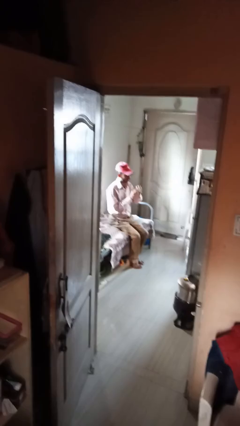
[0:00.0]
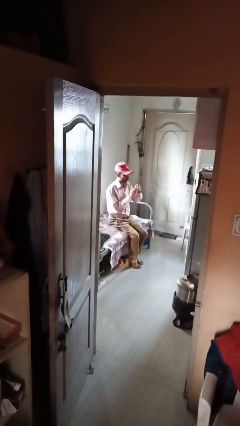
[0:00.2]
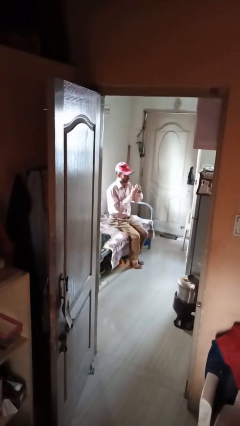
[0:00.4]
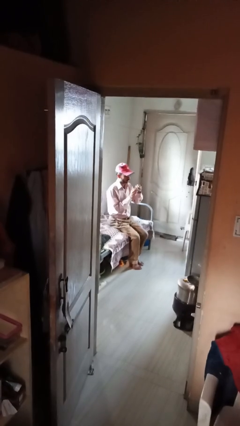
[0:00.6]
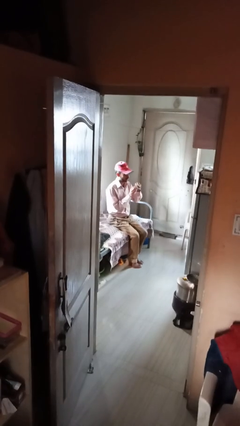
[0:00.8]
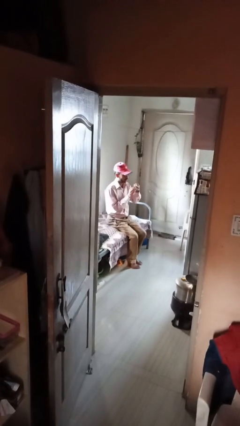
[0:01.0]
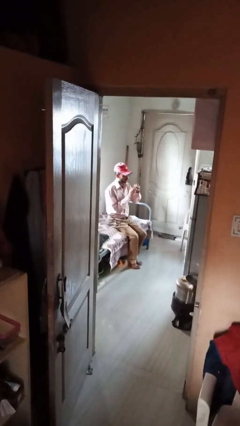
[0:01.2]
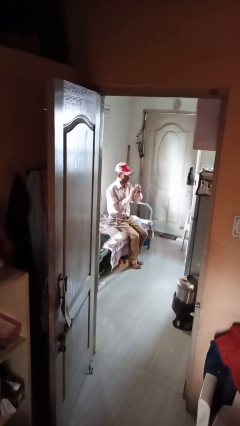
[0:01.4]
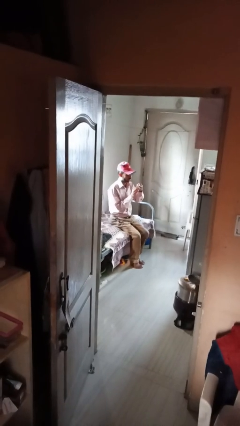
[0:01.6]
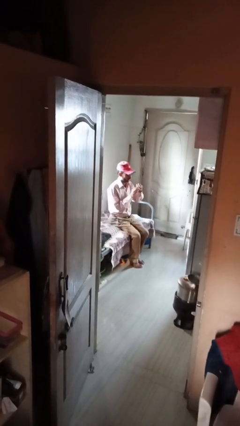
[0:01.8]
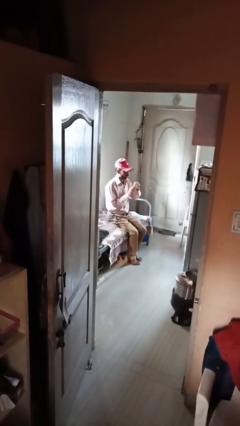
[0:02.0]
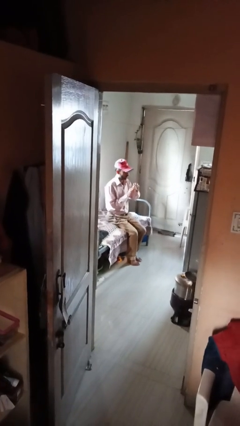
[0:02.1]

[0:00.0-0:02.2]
person files fingernails

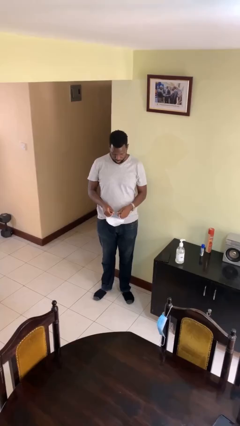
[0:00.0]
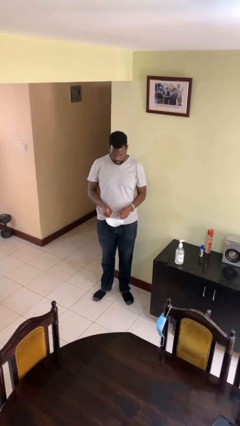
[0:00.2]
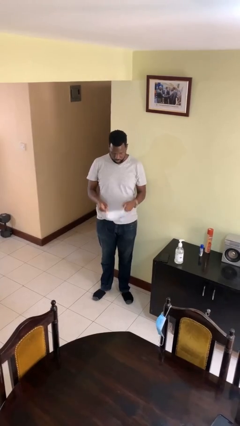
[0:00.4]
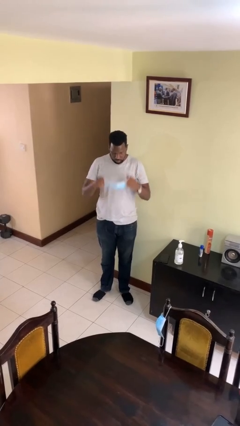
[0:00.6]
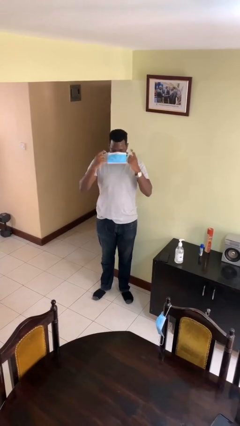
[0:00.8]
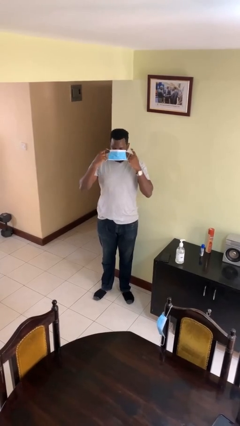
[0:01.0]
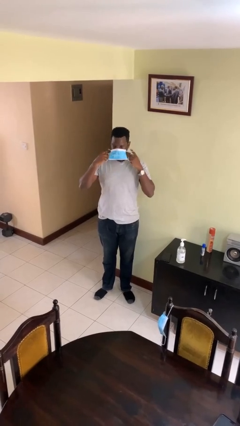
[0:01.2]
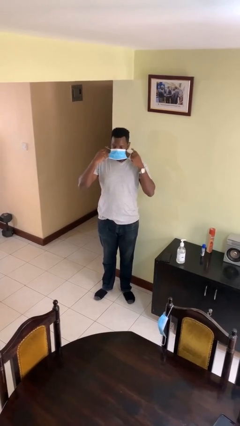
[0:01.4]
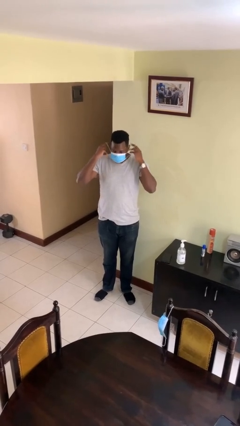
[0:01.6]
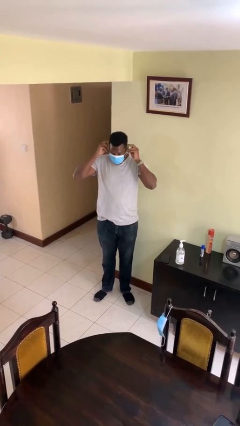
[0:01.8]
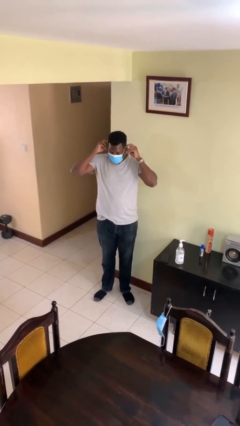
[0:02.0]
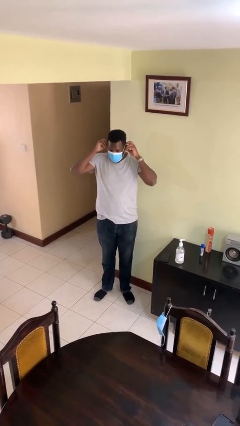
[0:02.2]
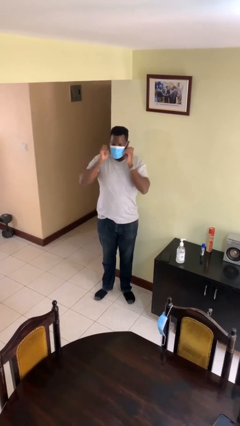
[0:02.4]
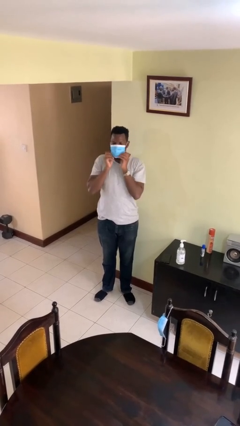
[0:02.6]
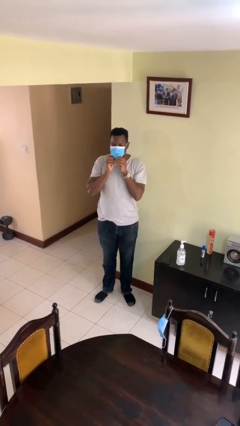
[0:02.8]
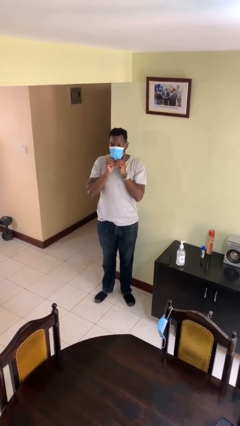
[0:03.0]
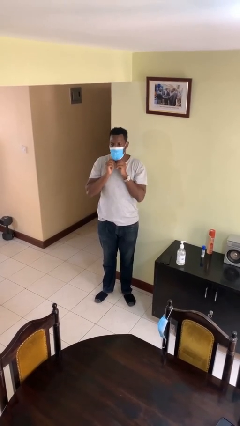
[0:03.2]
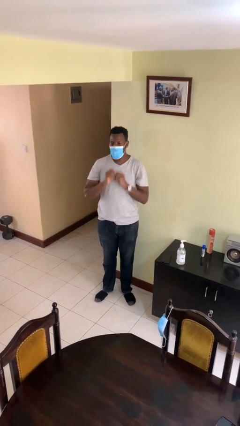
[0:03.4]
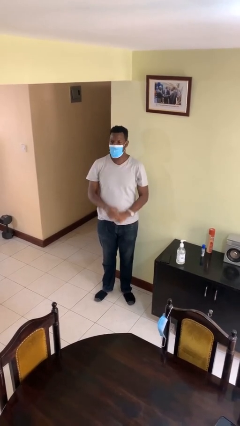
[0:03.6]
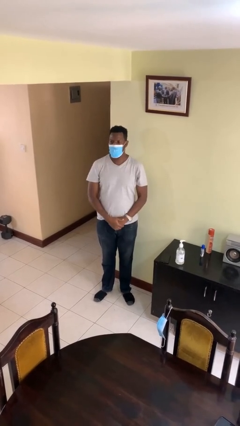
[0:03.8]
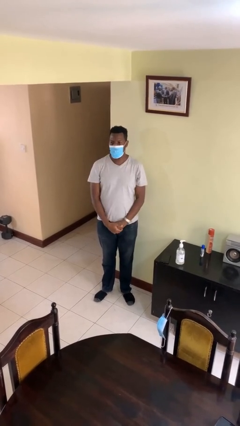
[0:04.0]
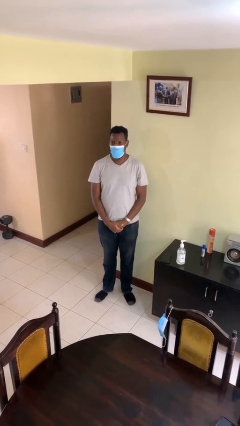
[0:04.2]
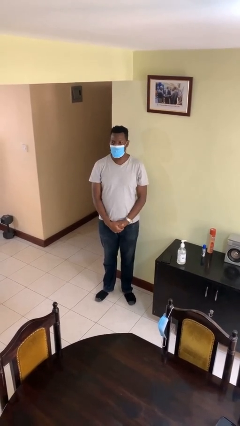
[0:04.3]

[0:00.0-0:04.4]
person puts on facemask

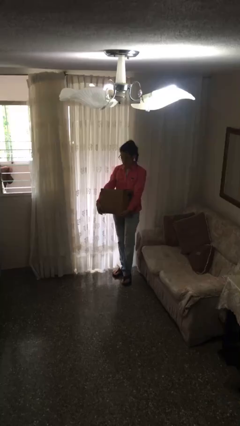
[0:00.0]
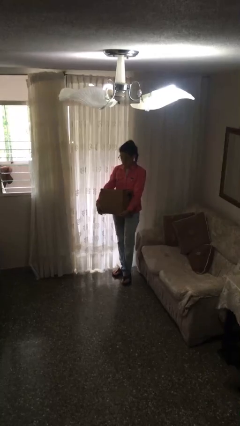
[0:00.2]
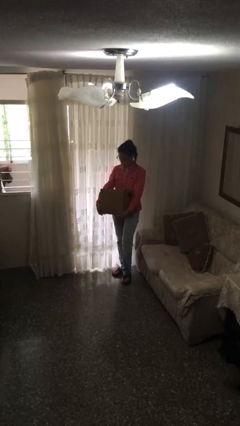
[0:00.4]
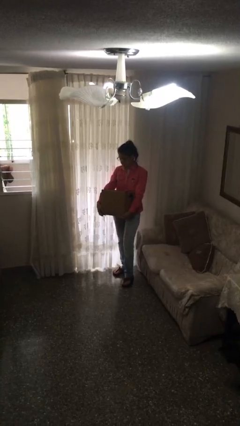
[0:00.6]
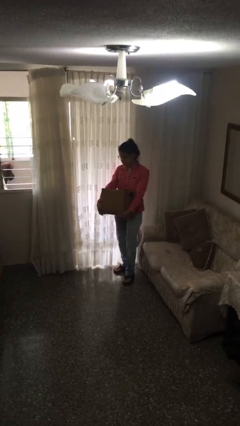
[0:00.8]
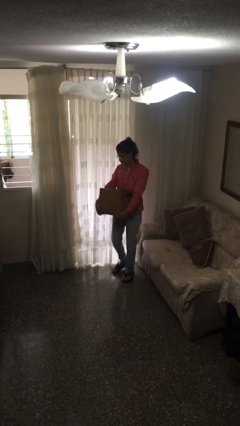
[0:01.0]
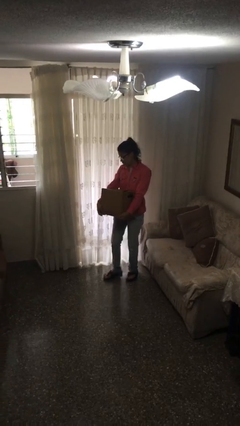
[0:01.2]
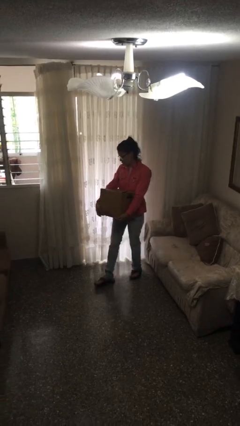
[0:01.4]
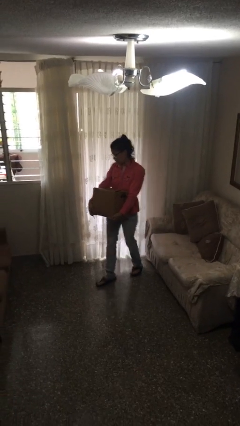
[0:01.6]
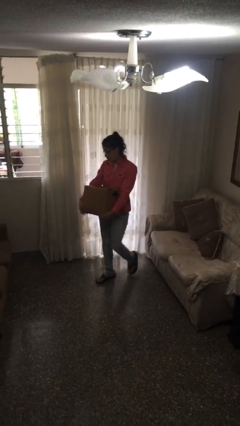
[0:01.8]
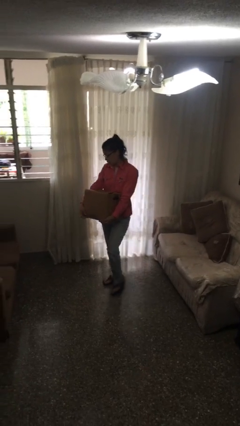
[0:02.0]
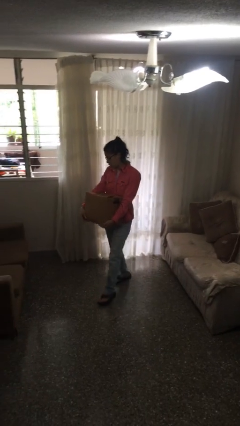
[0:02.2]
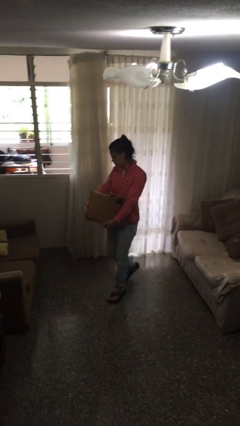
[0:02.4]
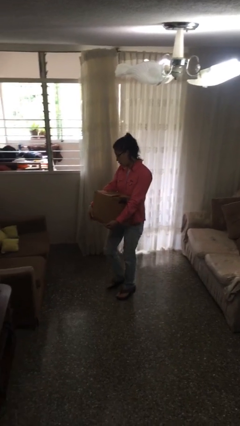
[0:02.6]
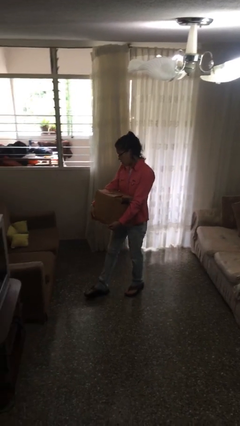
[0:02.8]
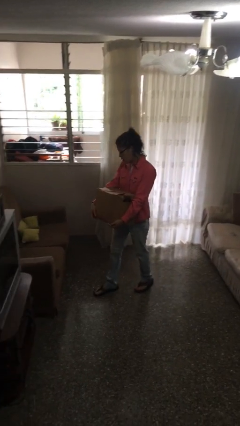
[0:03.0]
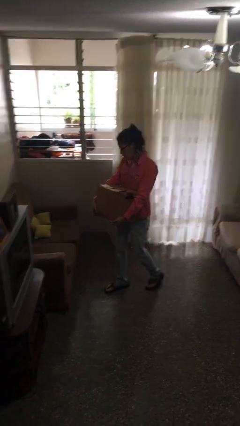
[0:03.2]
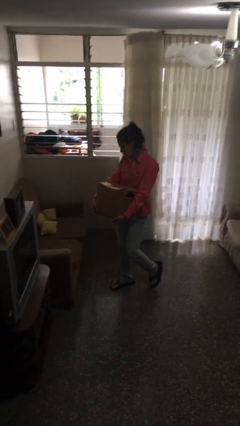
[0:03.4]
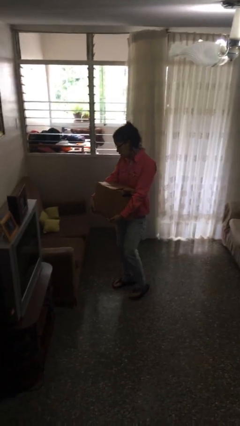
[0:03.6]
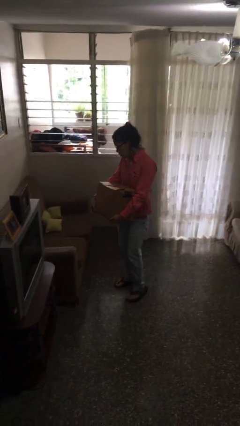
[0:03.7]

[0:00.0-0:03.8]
person carries heavy object

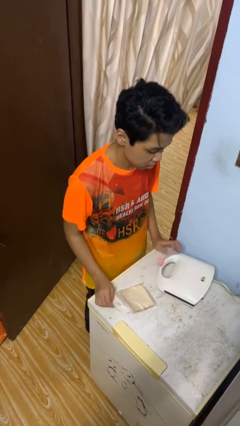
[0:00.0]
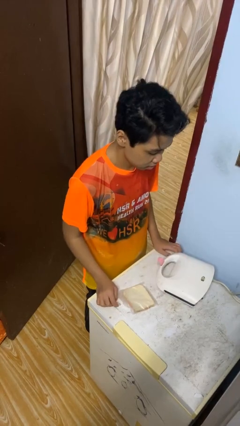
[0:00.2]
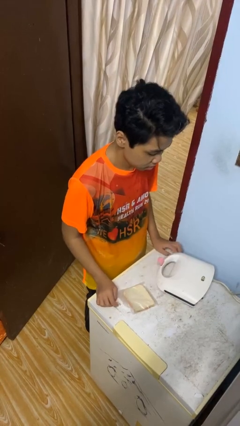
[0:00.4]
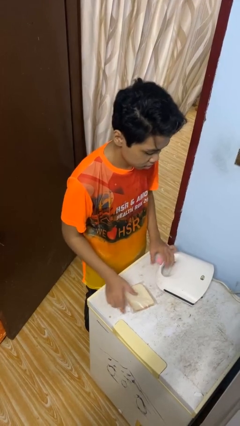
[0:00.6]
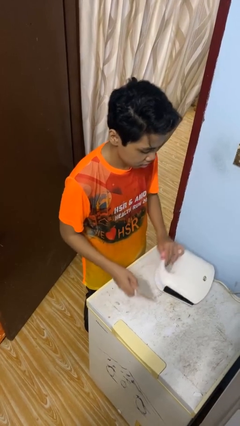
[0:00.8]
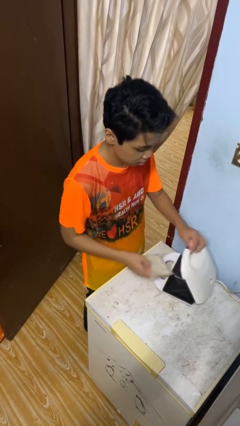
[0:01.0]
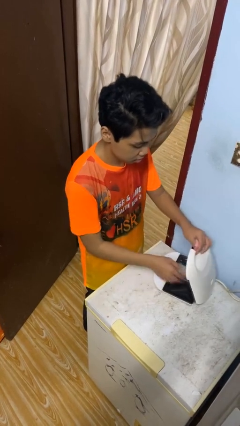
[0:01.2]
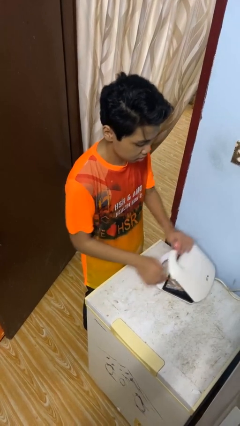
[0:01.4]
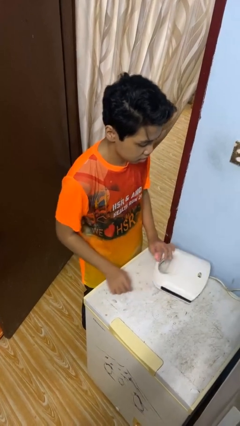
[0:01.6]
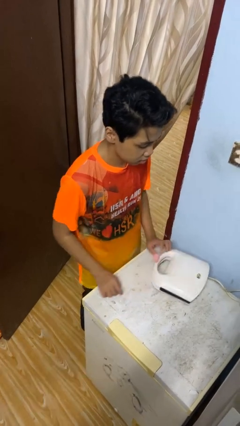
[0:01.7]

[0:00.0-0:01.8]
person puts object into toaster

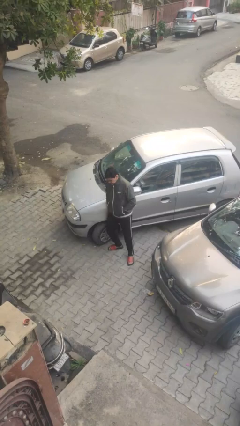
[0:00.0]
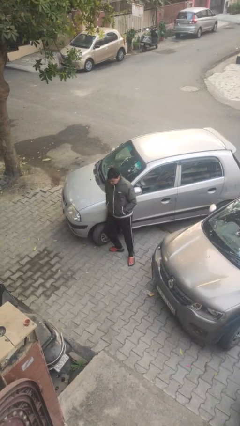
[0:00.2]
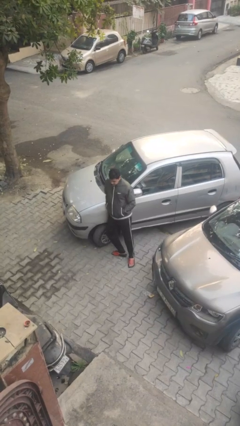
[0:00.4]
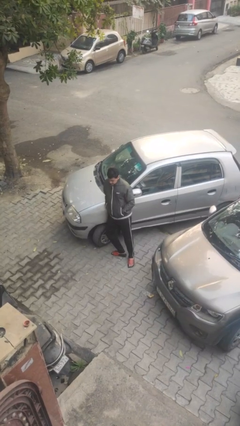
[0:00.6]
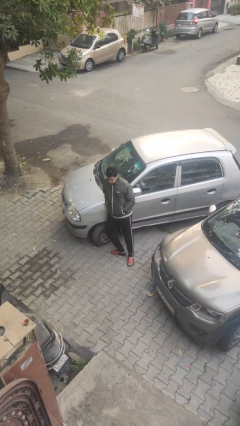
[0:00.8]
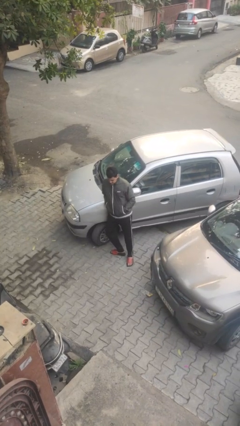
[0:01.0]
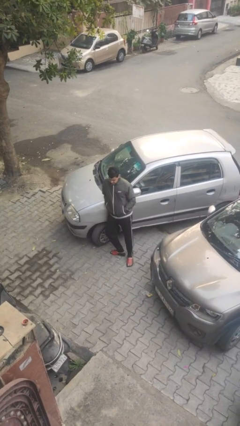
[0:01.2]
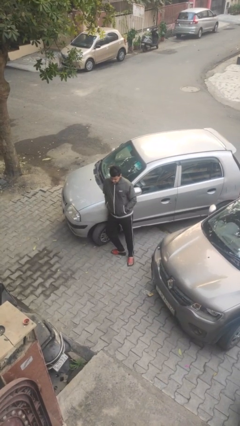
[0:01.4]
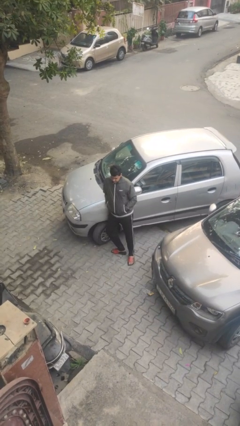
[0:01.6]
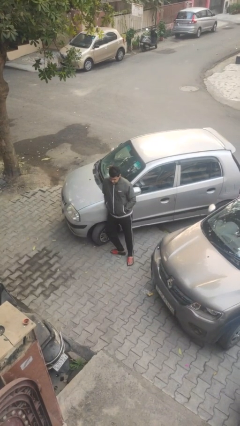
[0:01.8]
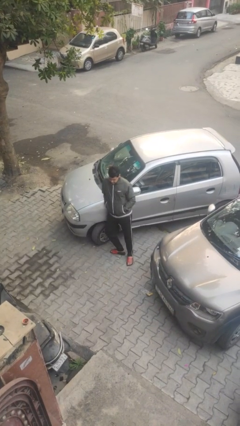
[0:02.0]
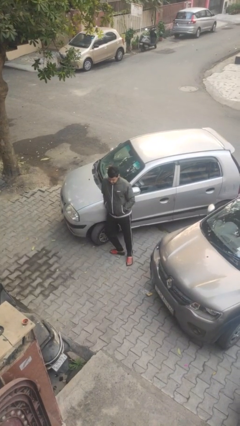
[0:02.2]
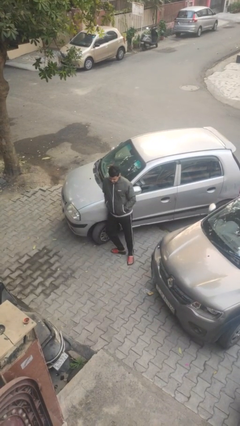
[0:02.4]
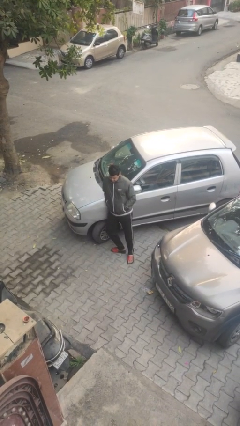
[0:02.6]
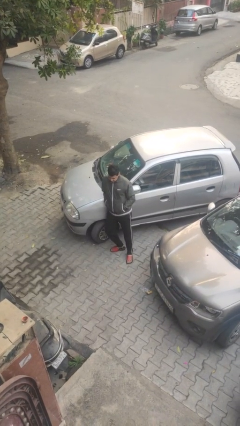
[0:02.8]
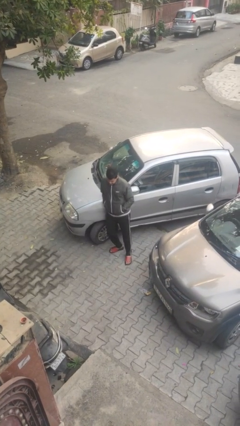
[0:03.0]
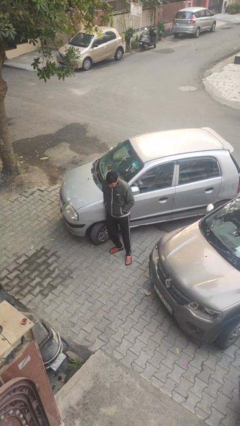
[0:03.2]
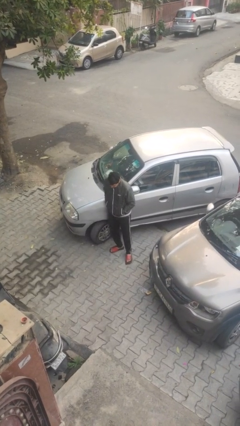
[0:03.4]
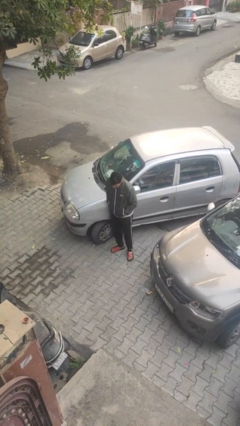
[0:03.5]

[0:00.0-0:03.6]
person leans against car

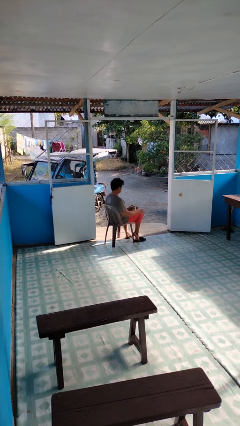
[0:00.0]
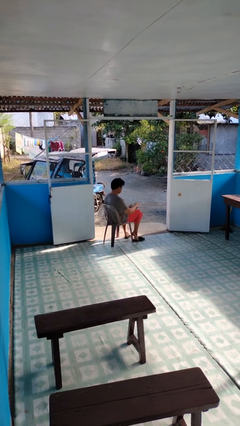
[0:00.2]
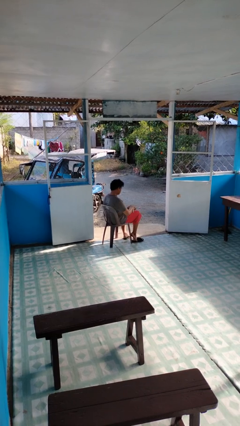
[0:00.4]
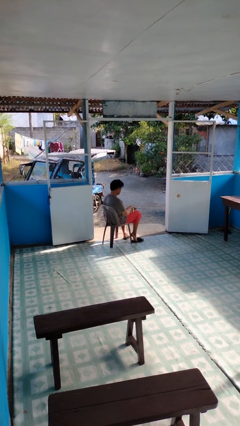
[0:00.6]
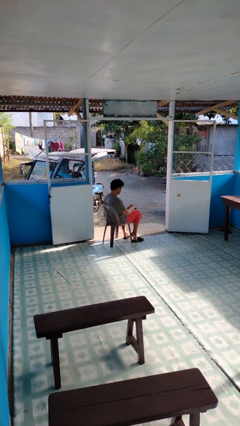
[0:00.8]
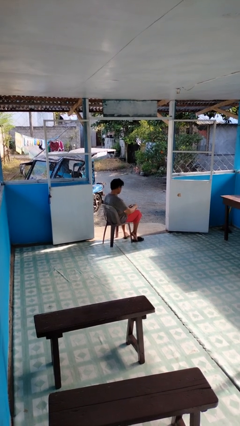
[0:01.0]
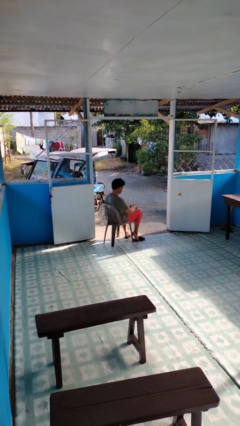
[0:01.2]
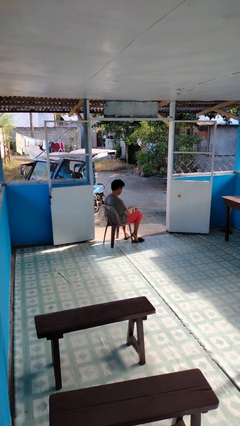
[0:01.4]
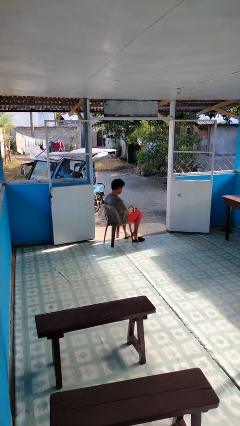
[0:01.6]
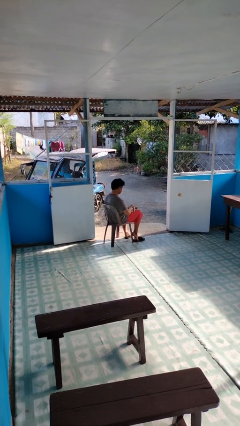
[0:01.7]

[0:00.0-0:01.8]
person pets cat
